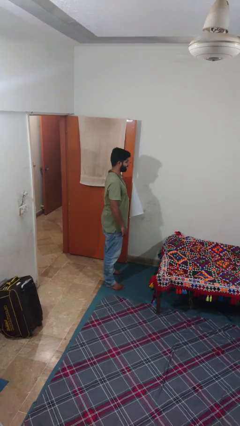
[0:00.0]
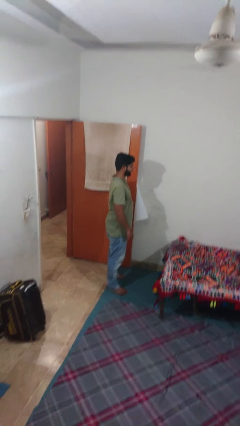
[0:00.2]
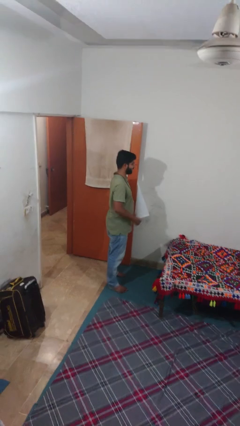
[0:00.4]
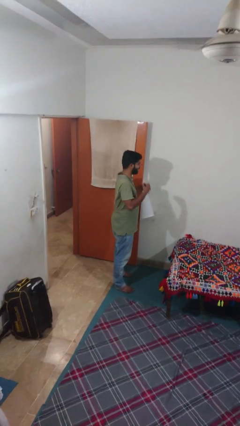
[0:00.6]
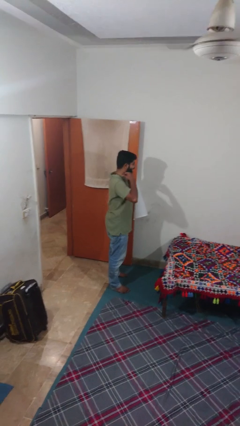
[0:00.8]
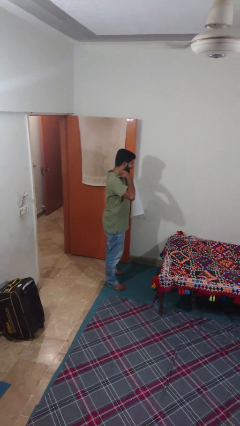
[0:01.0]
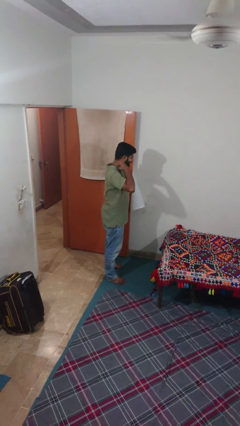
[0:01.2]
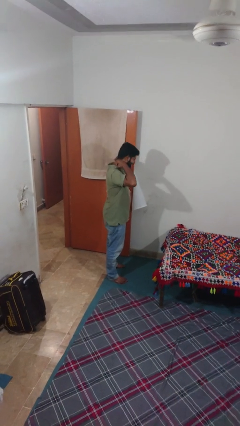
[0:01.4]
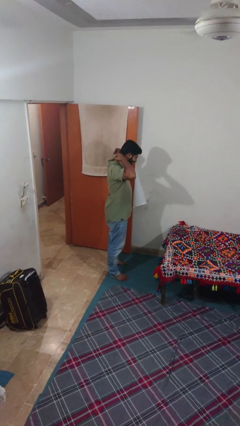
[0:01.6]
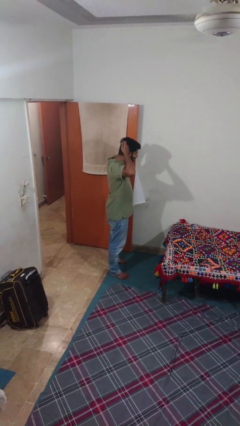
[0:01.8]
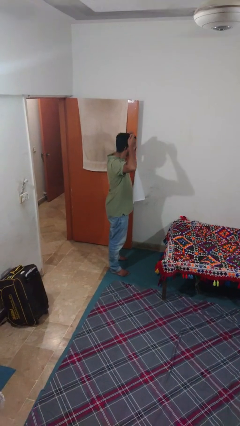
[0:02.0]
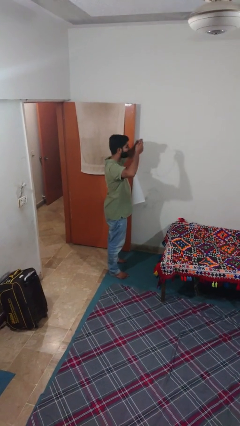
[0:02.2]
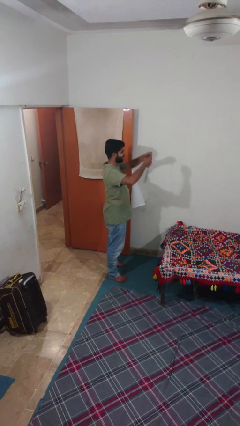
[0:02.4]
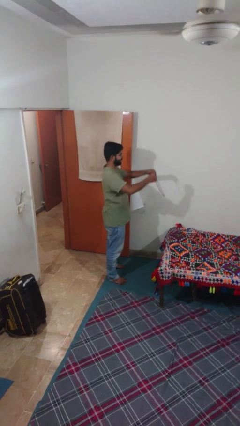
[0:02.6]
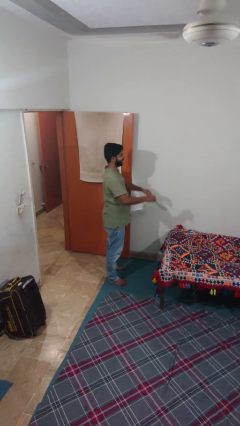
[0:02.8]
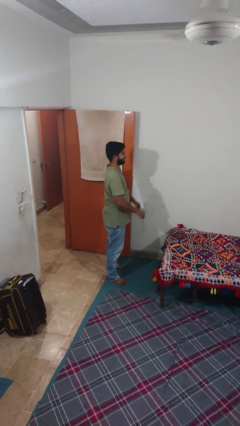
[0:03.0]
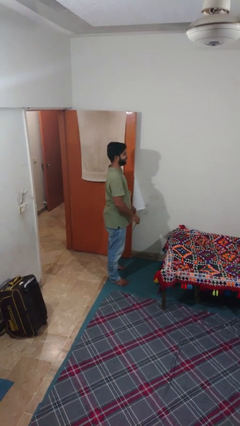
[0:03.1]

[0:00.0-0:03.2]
person takes off necklace

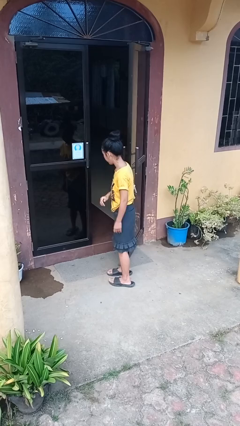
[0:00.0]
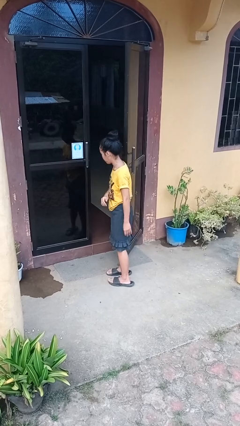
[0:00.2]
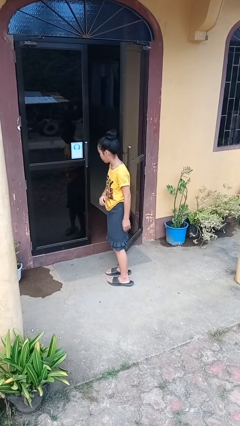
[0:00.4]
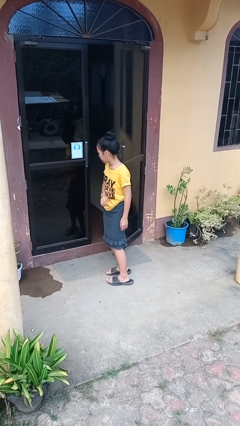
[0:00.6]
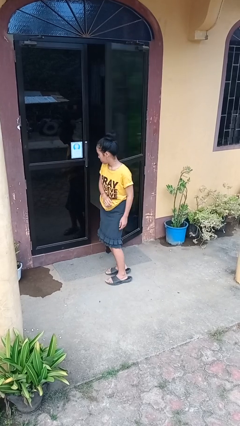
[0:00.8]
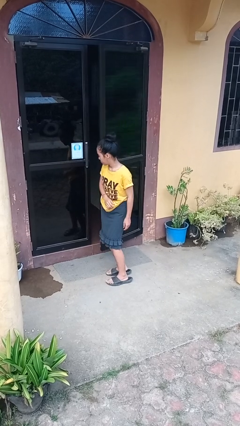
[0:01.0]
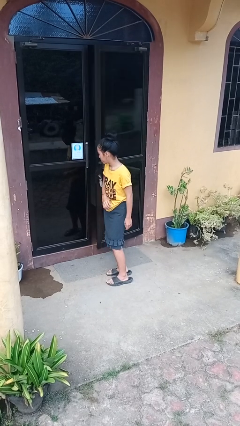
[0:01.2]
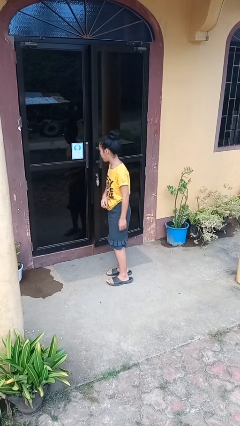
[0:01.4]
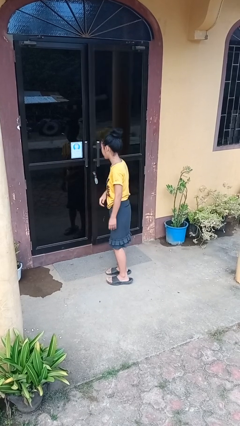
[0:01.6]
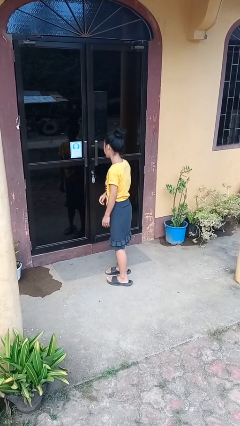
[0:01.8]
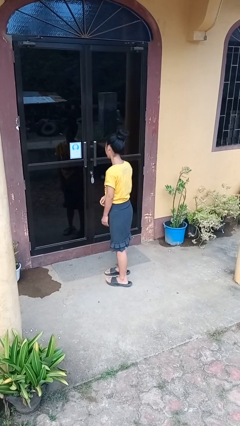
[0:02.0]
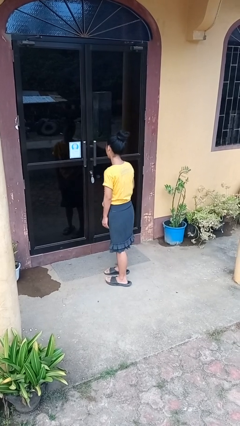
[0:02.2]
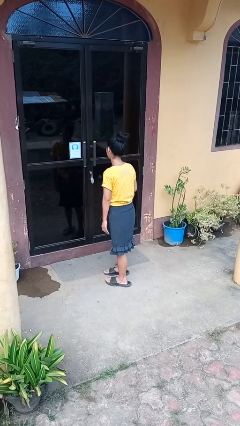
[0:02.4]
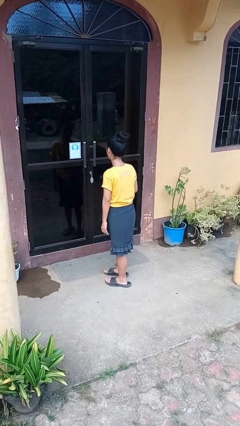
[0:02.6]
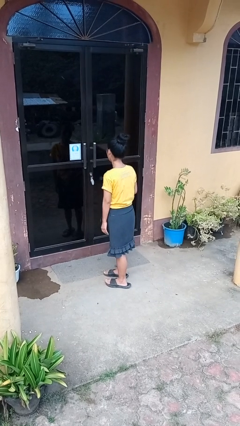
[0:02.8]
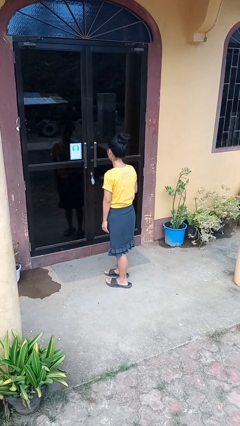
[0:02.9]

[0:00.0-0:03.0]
person closes door with hip

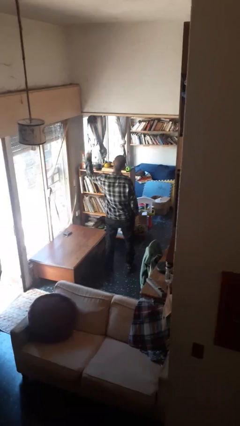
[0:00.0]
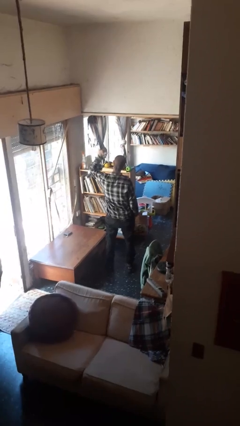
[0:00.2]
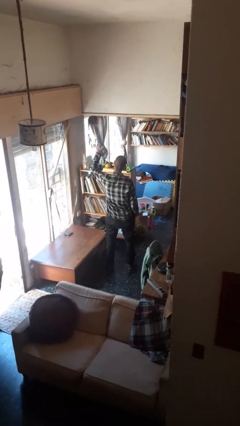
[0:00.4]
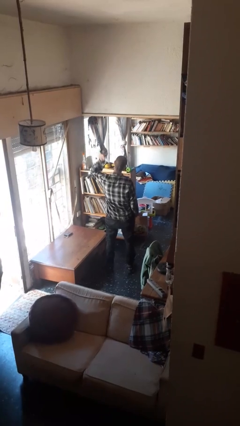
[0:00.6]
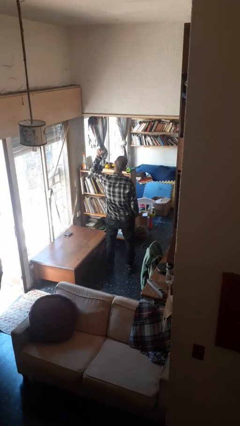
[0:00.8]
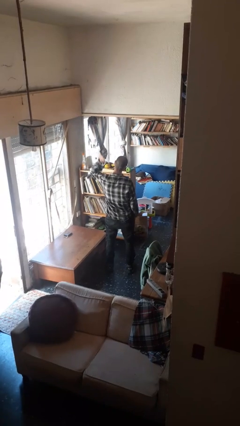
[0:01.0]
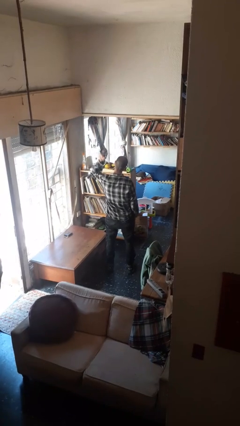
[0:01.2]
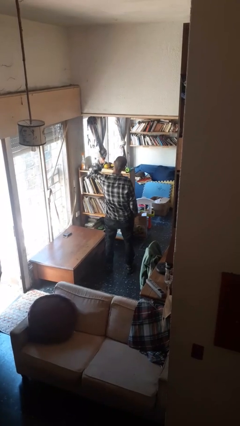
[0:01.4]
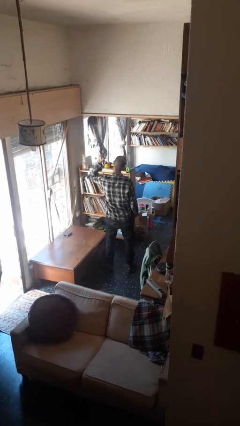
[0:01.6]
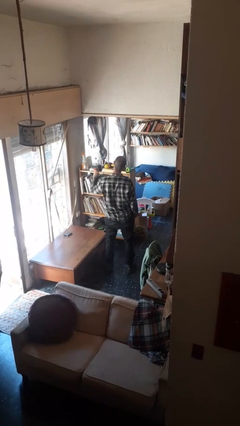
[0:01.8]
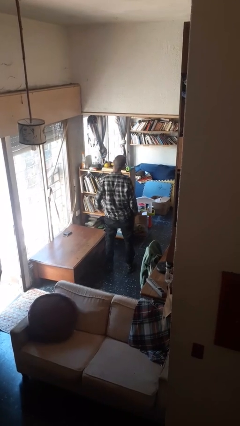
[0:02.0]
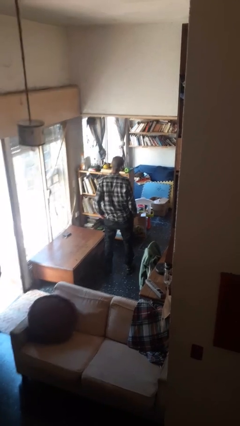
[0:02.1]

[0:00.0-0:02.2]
person gestures behind me

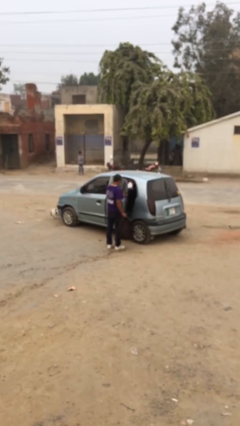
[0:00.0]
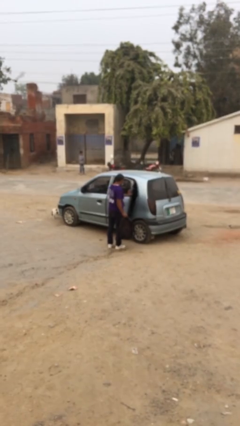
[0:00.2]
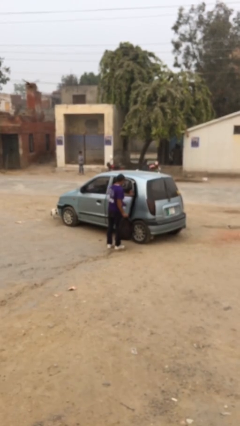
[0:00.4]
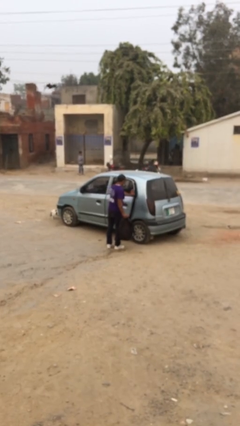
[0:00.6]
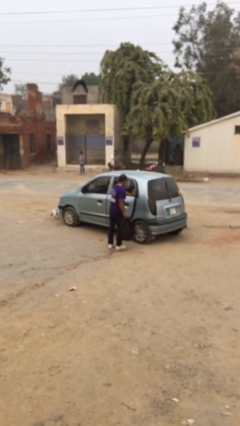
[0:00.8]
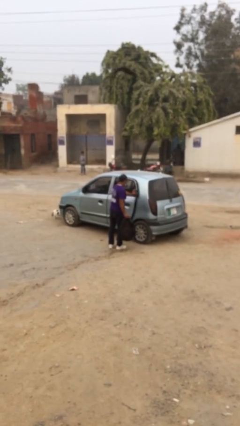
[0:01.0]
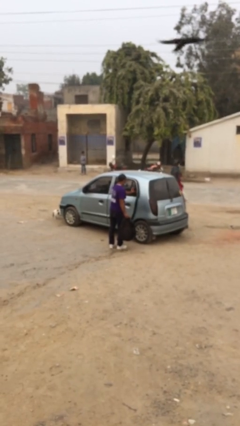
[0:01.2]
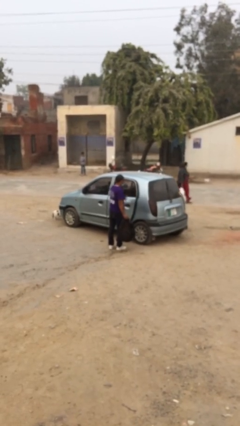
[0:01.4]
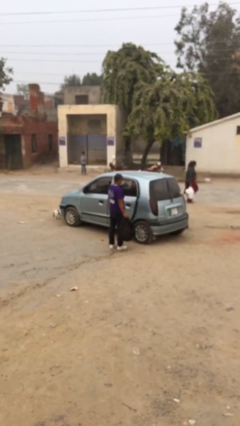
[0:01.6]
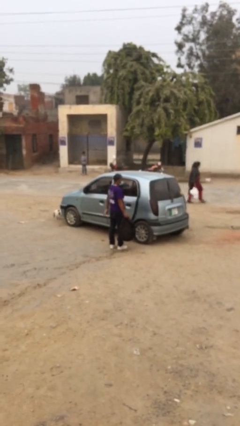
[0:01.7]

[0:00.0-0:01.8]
person closes car door

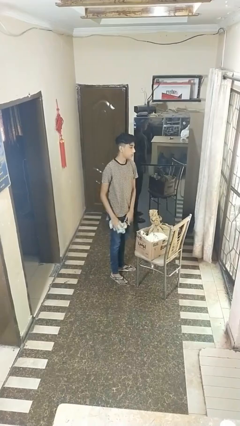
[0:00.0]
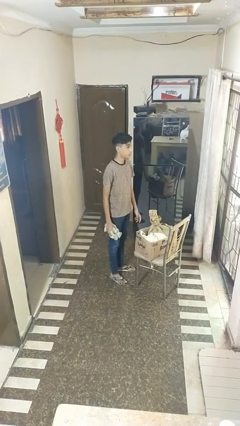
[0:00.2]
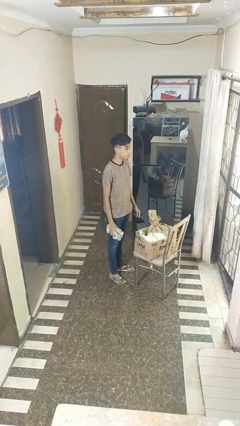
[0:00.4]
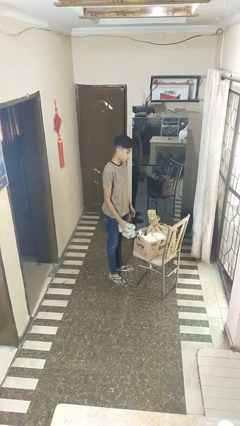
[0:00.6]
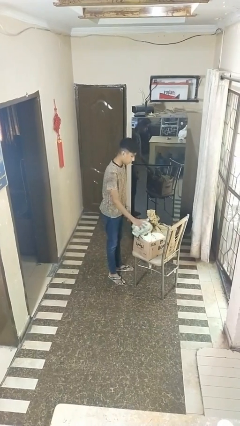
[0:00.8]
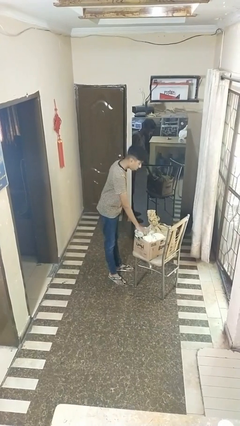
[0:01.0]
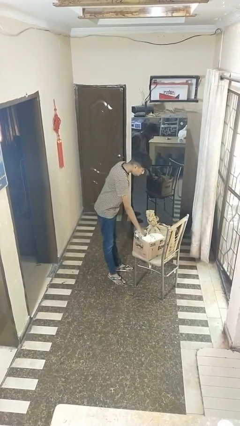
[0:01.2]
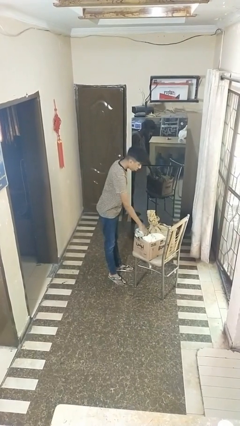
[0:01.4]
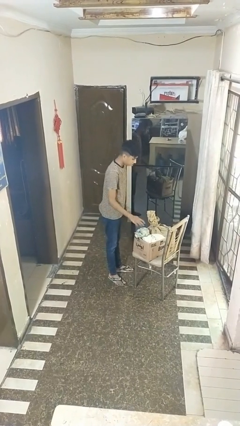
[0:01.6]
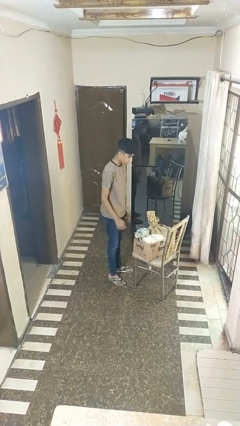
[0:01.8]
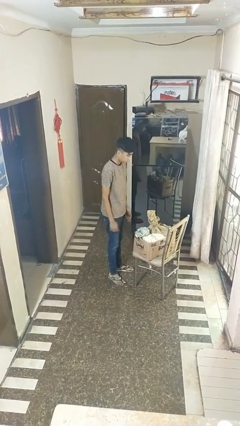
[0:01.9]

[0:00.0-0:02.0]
person puts object into box

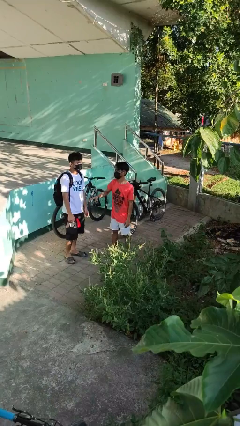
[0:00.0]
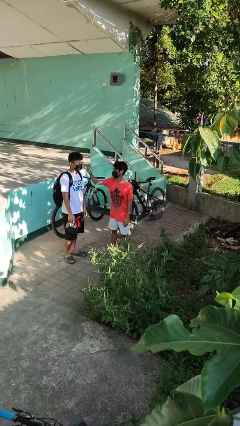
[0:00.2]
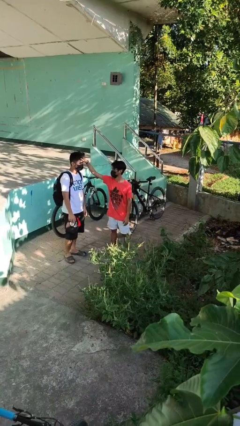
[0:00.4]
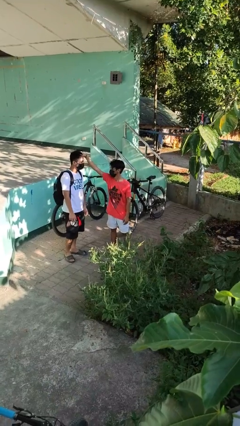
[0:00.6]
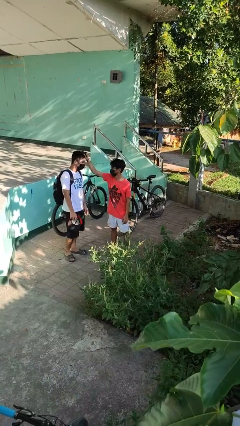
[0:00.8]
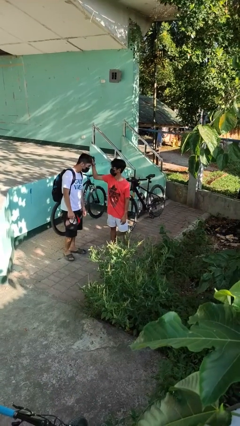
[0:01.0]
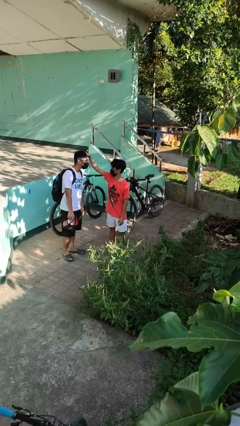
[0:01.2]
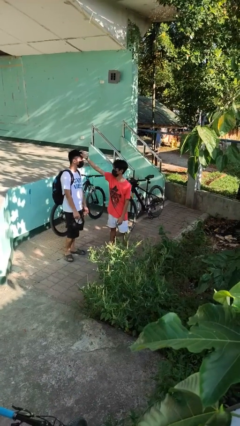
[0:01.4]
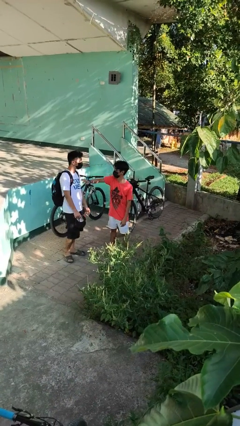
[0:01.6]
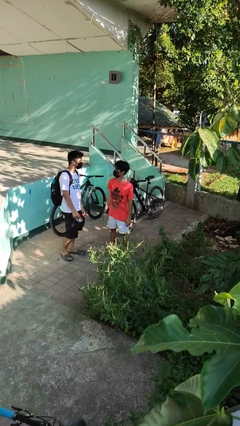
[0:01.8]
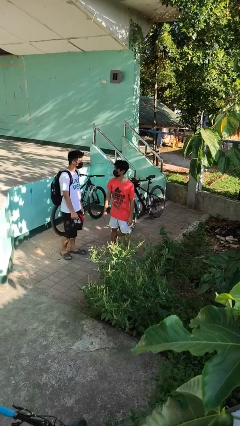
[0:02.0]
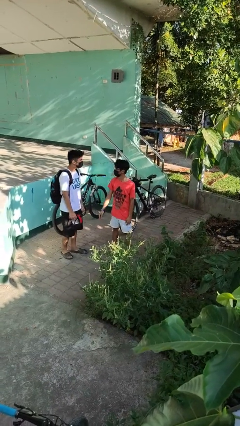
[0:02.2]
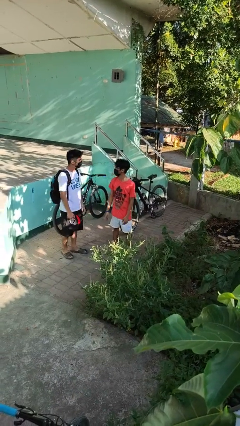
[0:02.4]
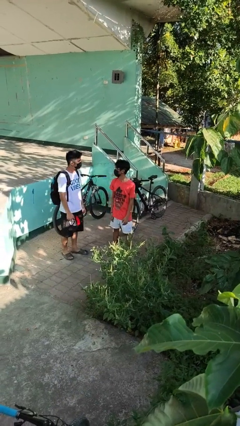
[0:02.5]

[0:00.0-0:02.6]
person grabs person by hair

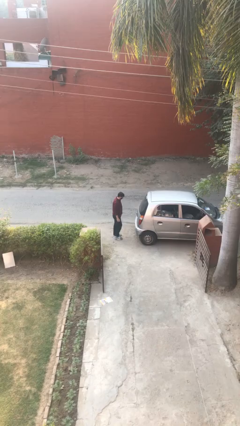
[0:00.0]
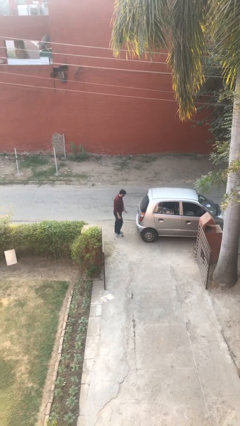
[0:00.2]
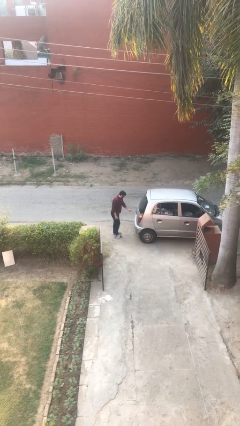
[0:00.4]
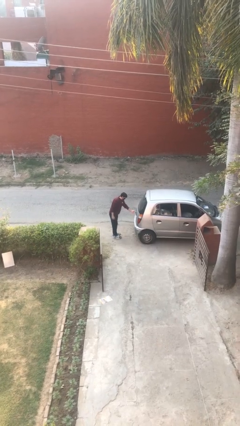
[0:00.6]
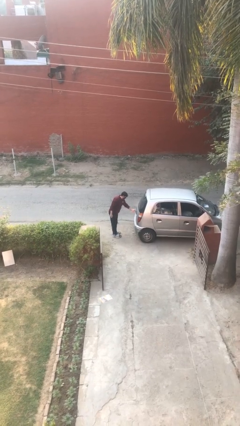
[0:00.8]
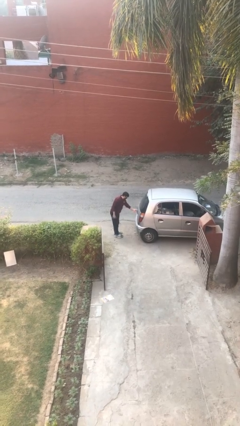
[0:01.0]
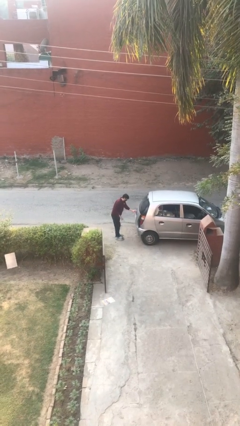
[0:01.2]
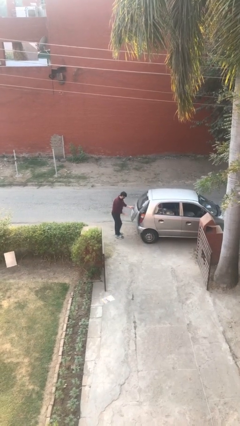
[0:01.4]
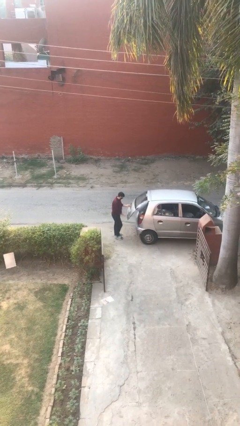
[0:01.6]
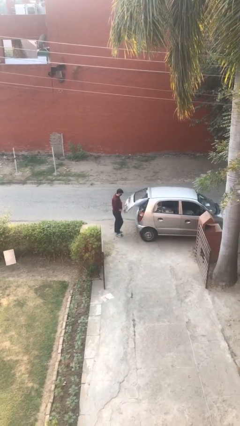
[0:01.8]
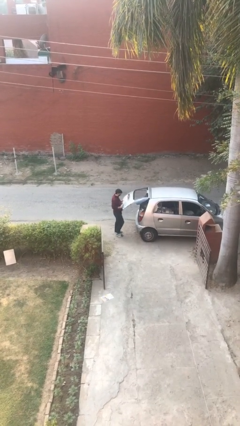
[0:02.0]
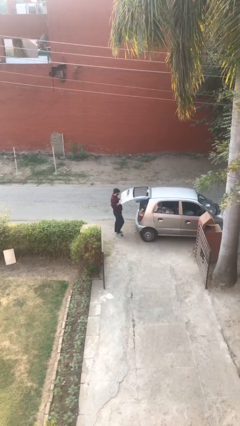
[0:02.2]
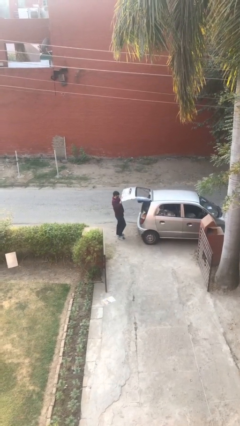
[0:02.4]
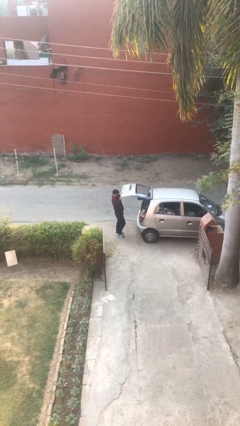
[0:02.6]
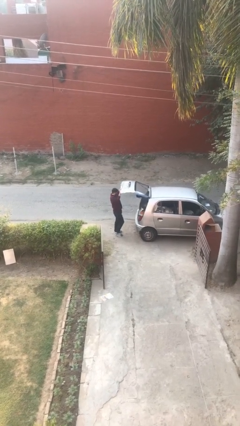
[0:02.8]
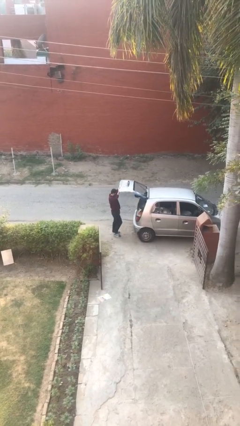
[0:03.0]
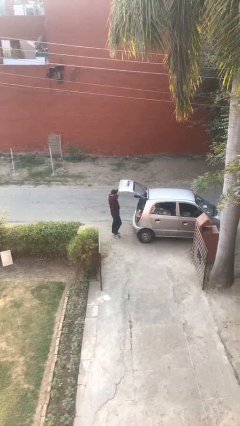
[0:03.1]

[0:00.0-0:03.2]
person opens car trunk
